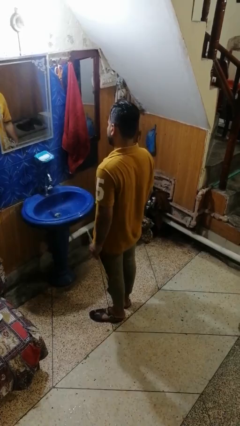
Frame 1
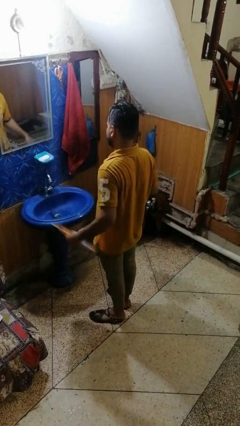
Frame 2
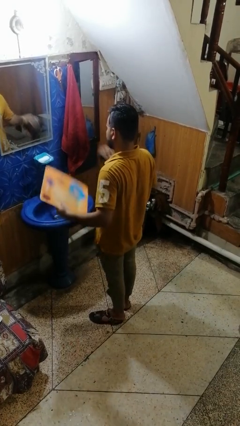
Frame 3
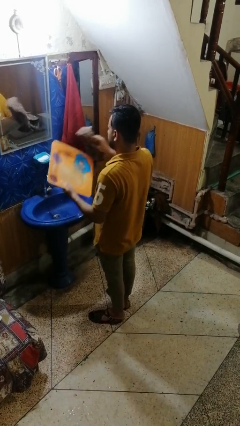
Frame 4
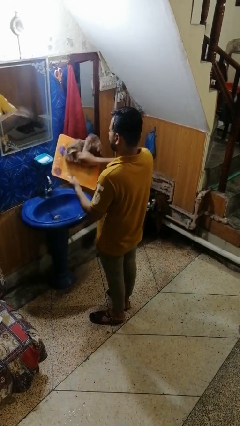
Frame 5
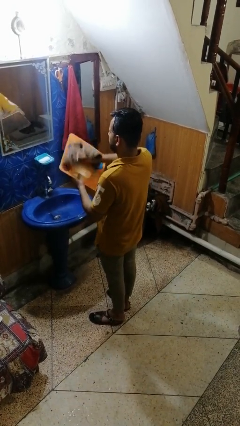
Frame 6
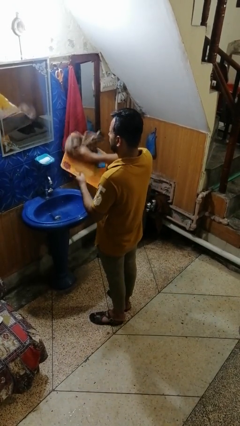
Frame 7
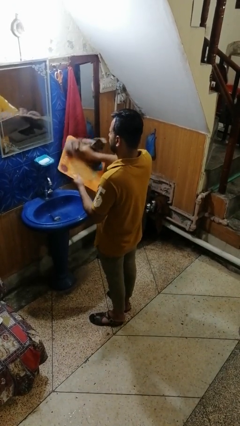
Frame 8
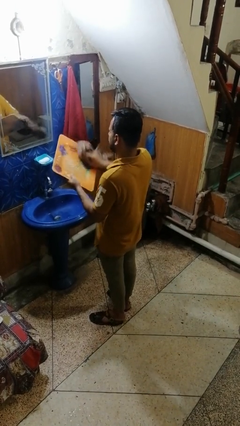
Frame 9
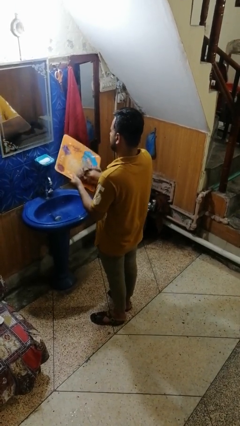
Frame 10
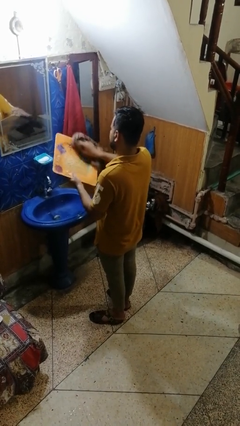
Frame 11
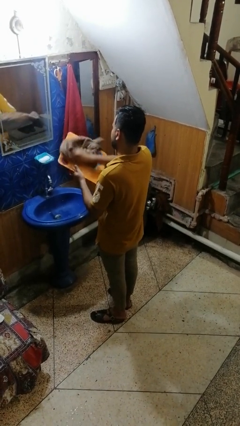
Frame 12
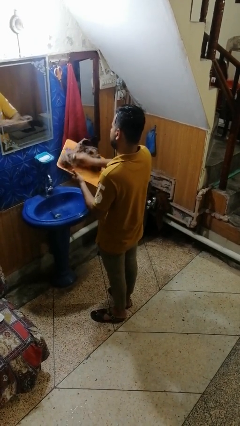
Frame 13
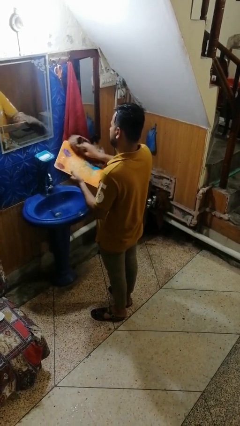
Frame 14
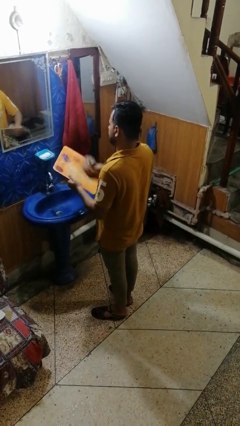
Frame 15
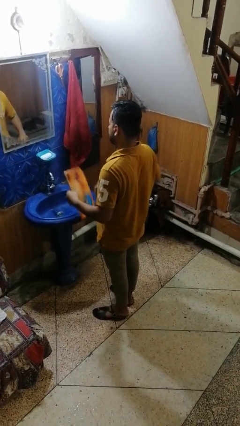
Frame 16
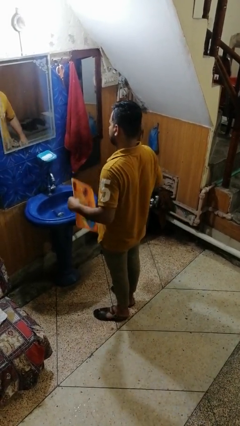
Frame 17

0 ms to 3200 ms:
person dries dish

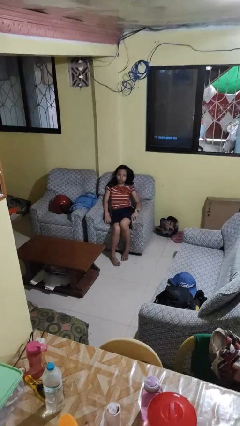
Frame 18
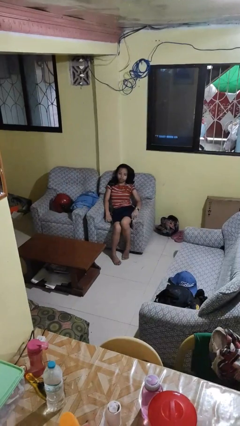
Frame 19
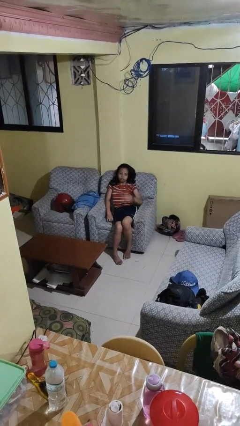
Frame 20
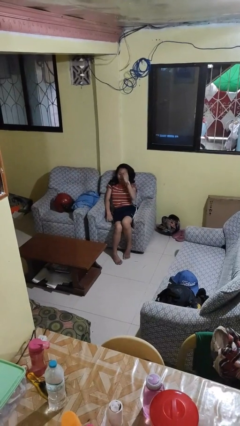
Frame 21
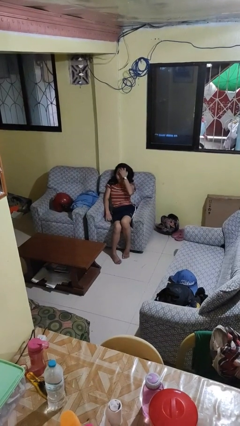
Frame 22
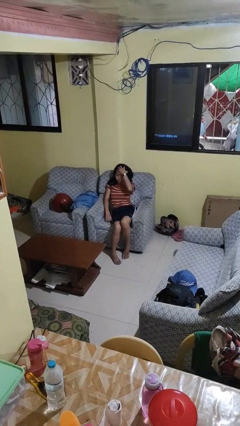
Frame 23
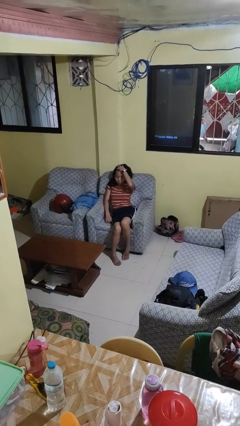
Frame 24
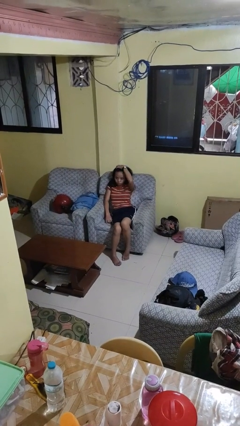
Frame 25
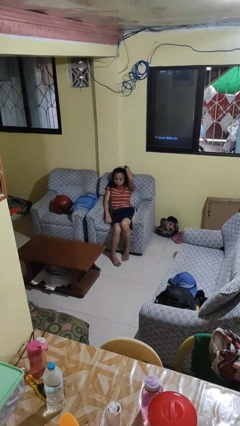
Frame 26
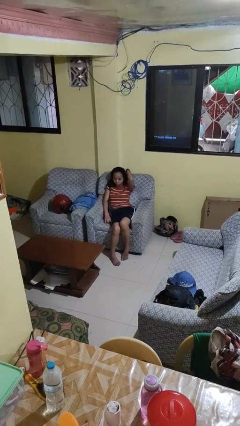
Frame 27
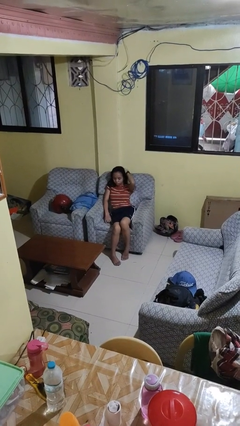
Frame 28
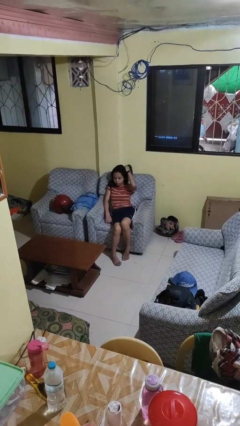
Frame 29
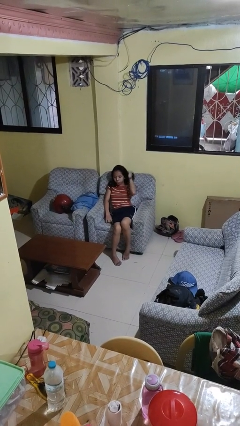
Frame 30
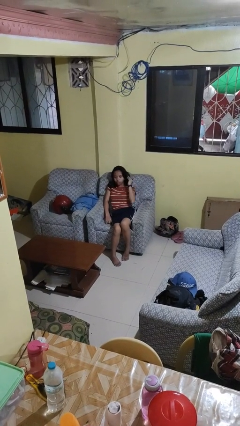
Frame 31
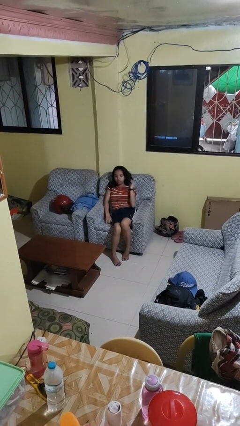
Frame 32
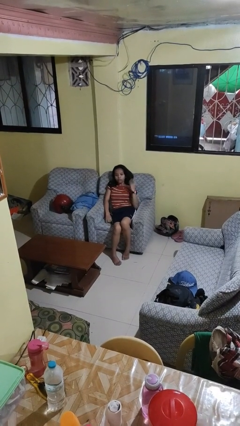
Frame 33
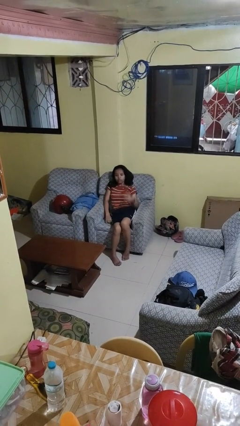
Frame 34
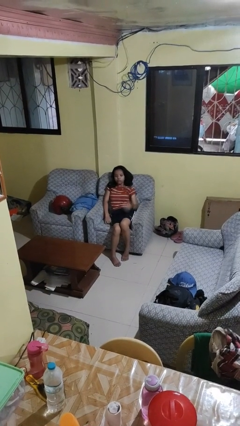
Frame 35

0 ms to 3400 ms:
person strokes hair

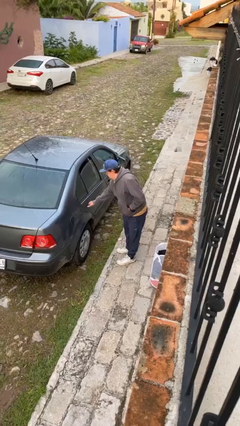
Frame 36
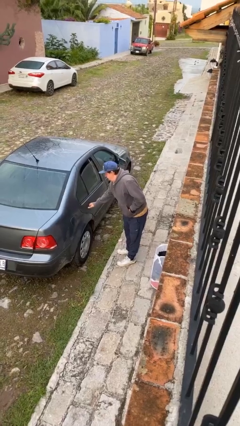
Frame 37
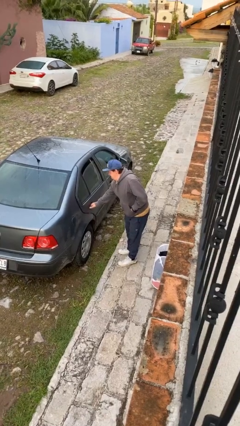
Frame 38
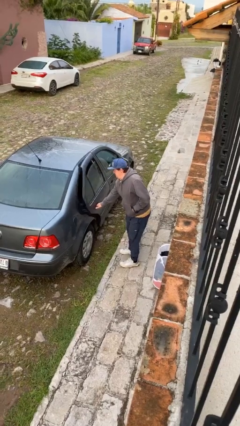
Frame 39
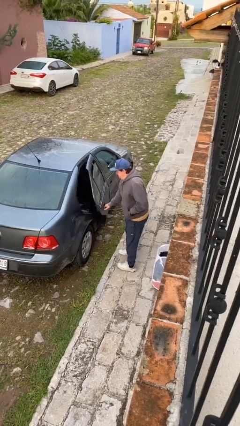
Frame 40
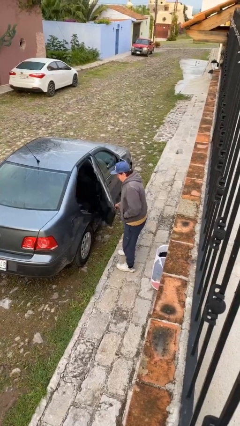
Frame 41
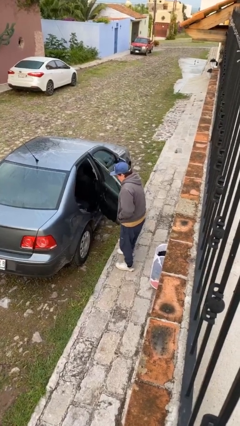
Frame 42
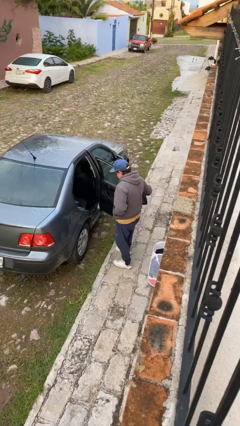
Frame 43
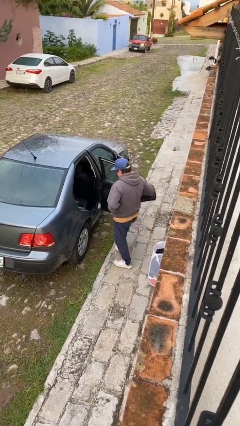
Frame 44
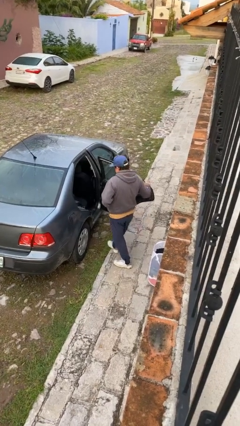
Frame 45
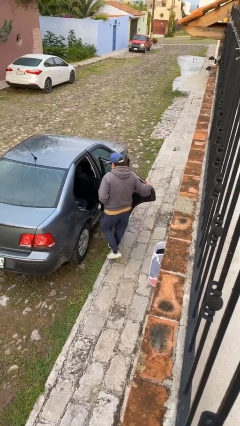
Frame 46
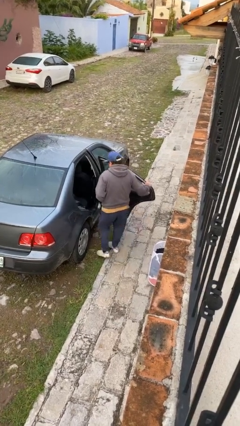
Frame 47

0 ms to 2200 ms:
person opens car door

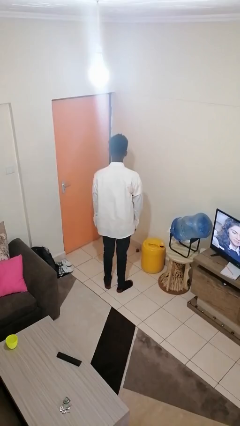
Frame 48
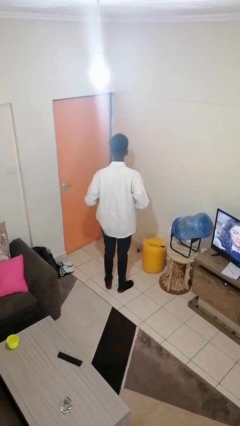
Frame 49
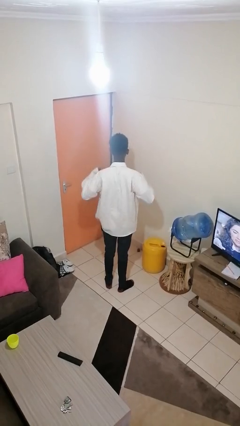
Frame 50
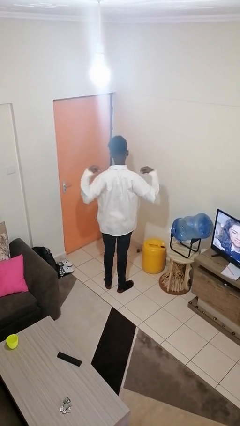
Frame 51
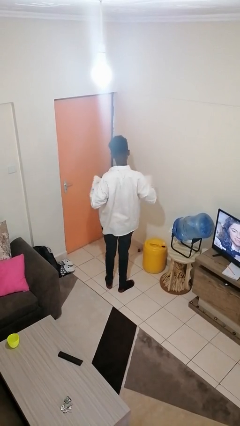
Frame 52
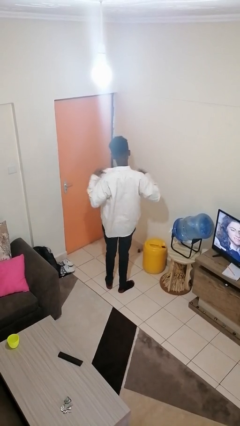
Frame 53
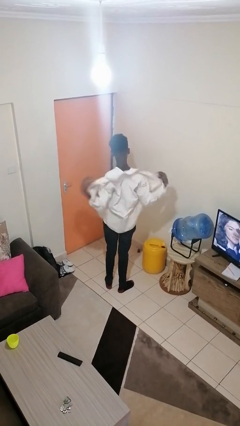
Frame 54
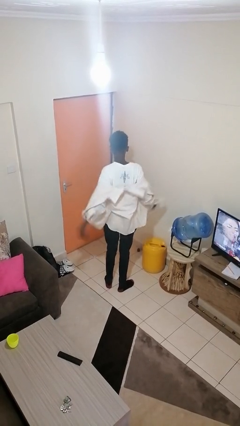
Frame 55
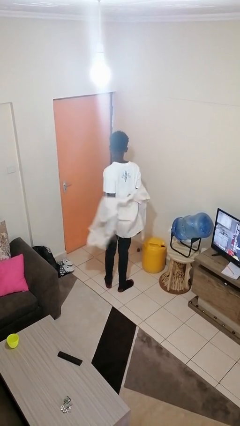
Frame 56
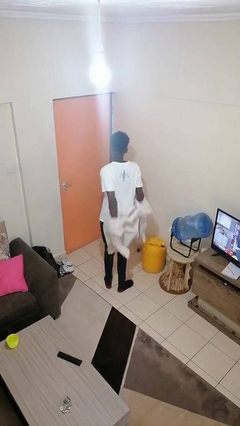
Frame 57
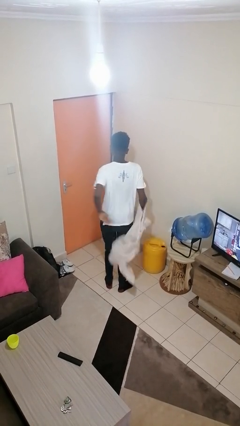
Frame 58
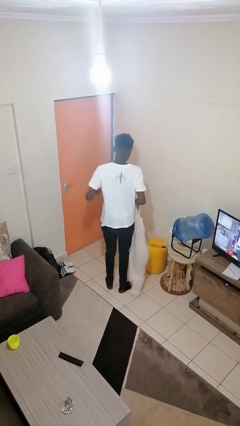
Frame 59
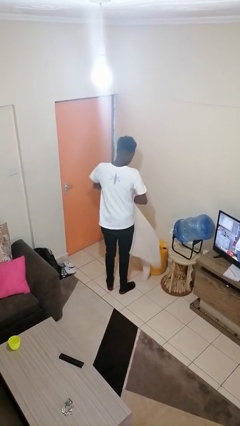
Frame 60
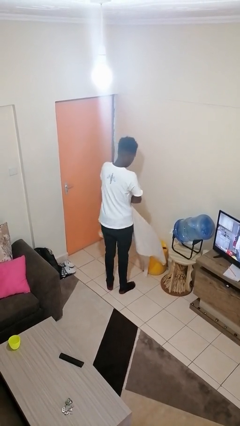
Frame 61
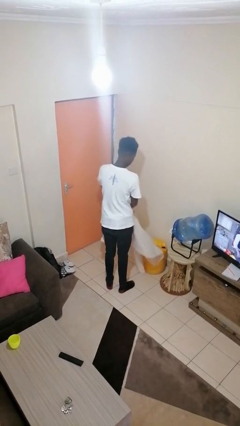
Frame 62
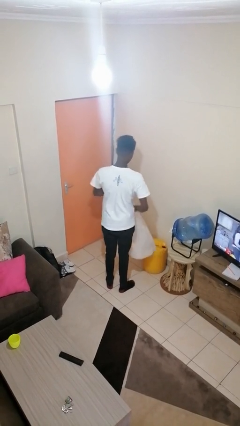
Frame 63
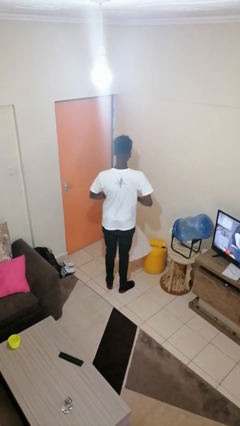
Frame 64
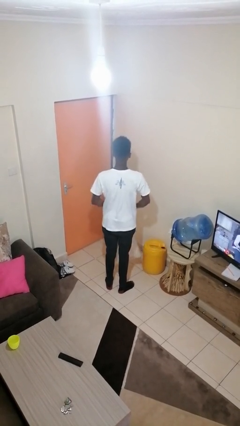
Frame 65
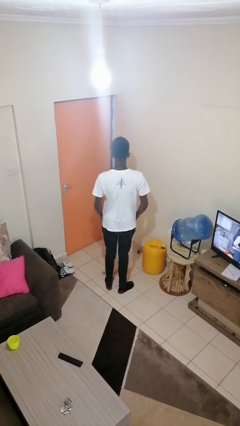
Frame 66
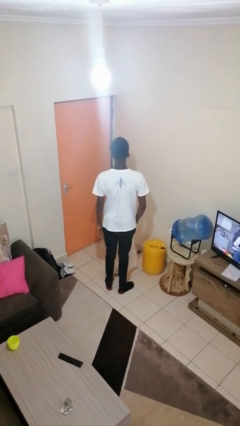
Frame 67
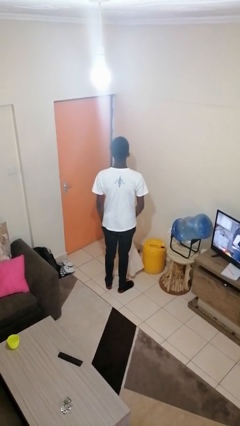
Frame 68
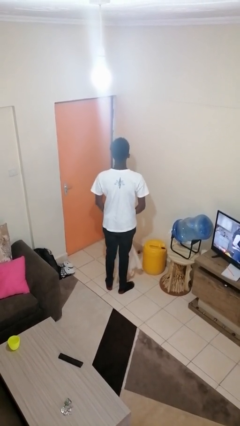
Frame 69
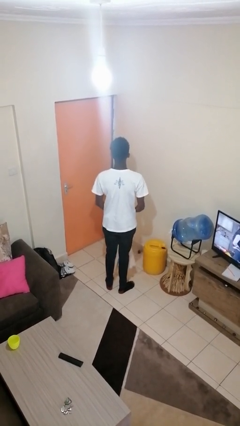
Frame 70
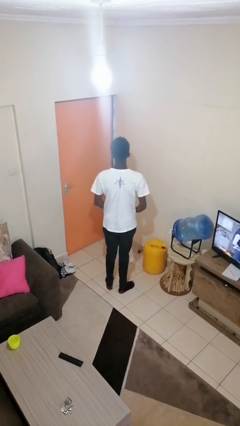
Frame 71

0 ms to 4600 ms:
person takes off shirt

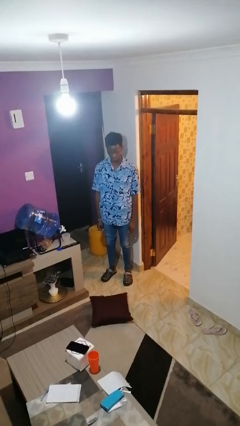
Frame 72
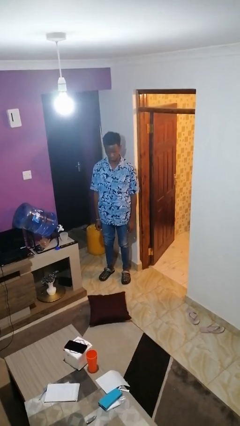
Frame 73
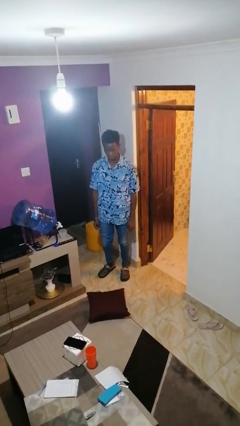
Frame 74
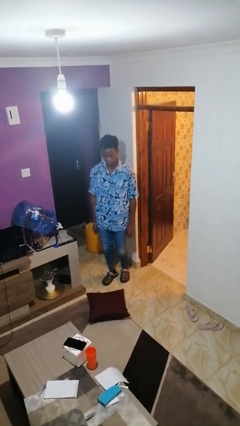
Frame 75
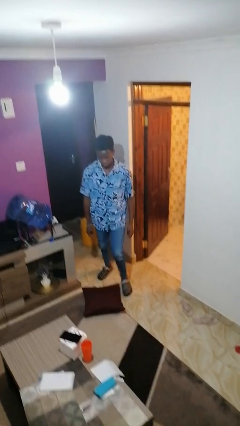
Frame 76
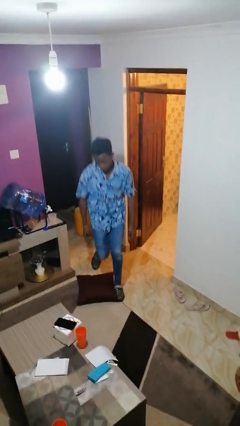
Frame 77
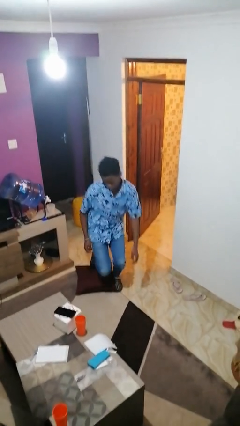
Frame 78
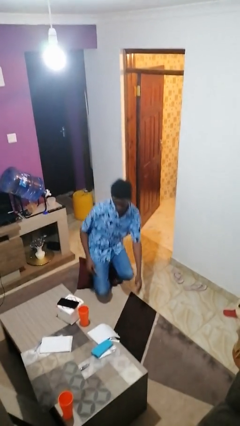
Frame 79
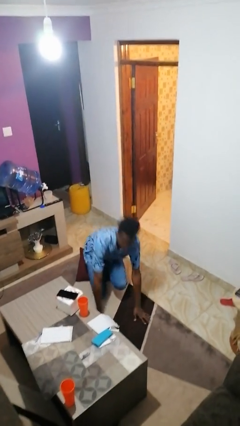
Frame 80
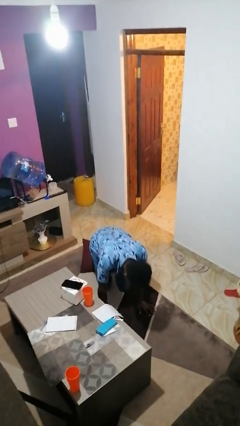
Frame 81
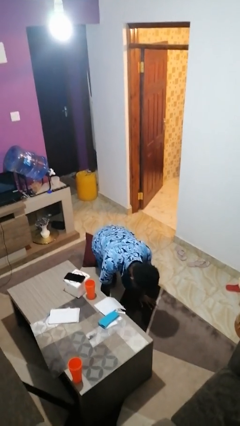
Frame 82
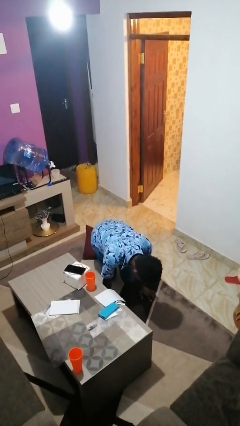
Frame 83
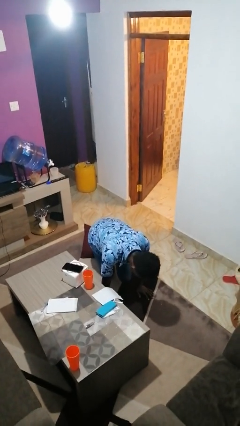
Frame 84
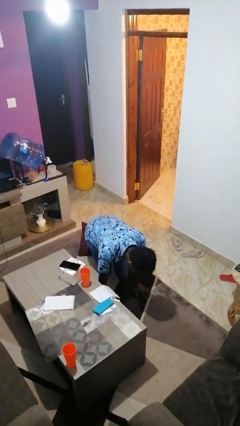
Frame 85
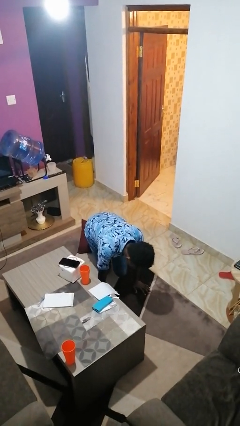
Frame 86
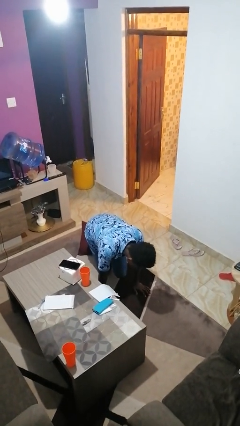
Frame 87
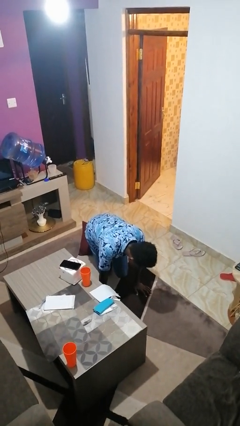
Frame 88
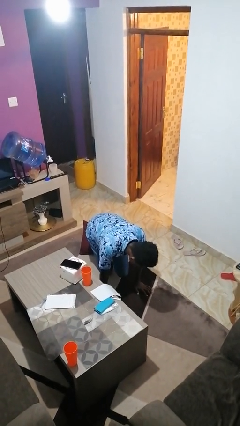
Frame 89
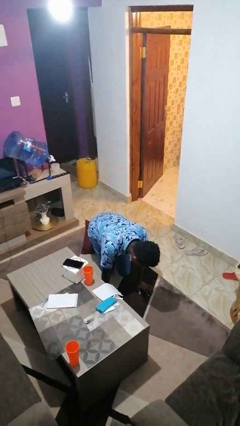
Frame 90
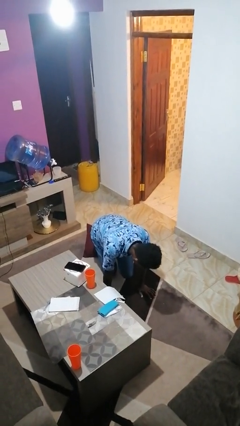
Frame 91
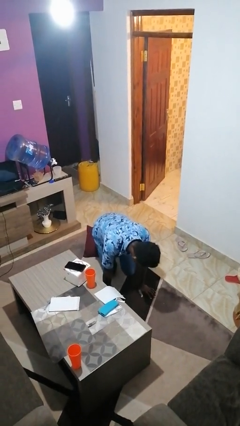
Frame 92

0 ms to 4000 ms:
person trips on object on floor
